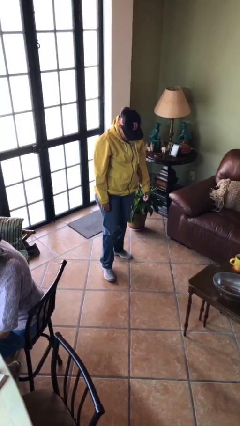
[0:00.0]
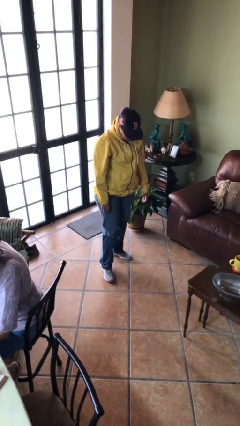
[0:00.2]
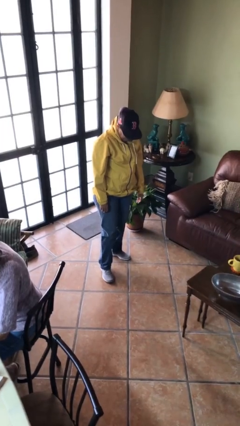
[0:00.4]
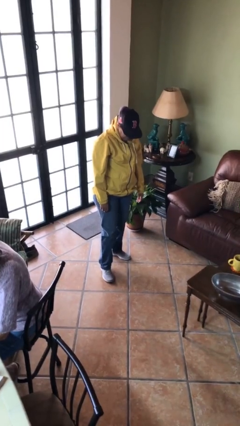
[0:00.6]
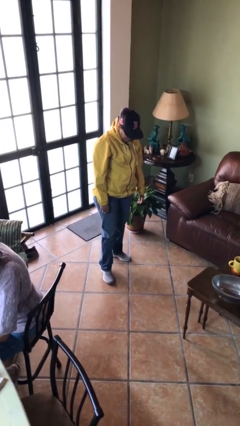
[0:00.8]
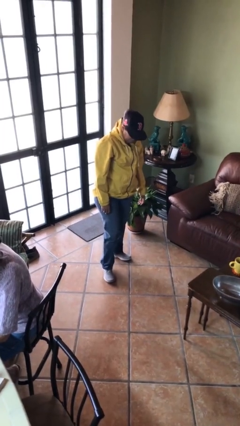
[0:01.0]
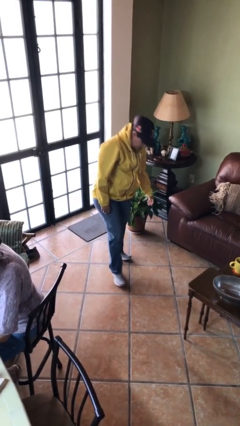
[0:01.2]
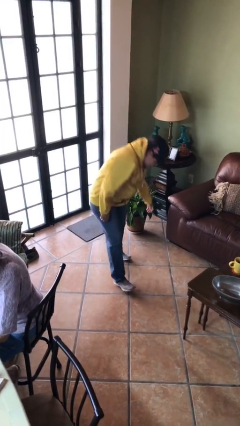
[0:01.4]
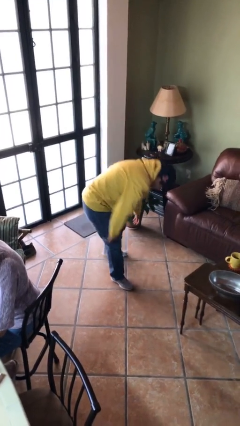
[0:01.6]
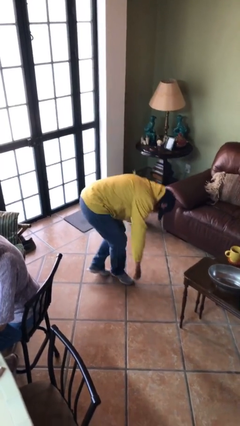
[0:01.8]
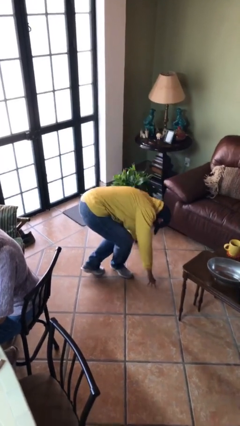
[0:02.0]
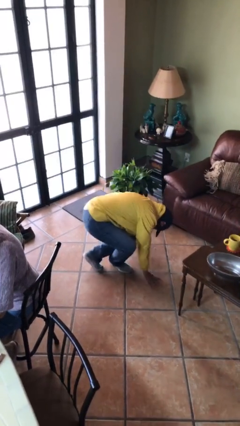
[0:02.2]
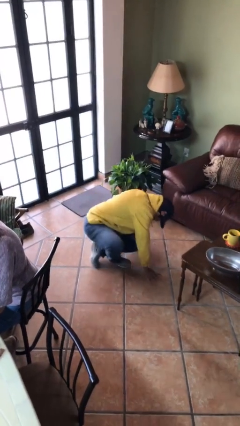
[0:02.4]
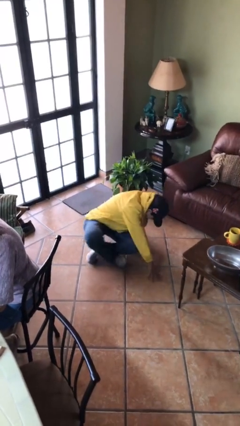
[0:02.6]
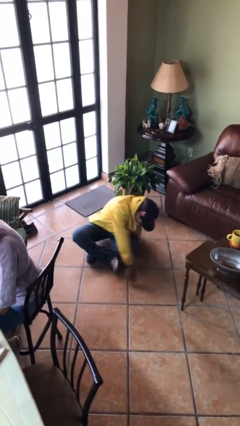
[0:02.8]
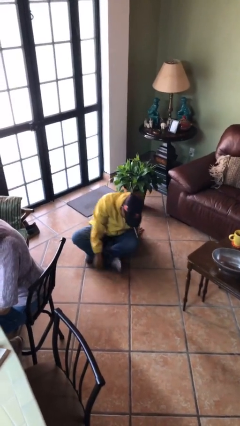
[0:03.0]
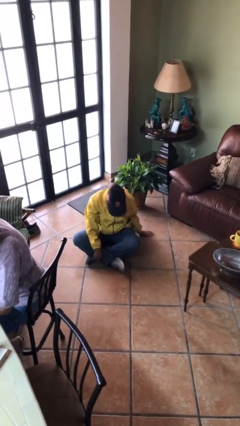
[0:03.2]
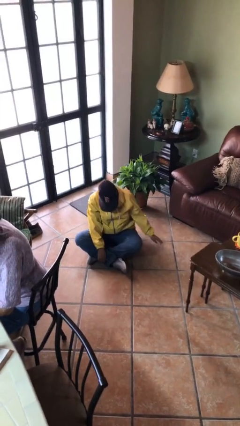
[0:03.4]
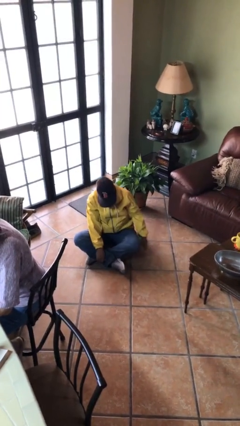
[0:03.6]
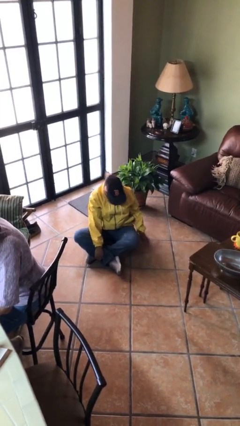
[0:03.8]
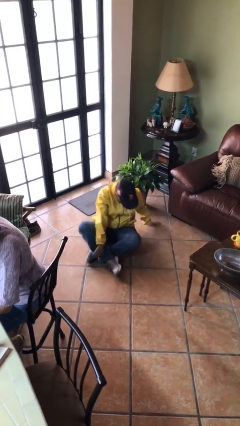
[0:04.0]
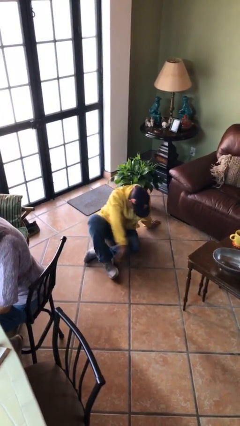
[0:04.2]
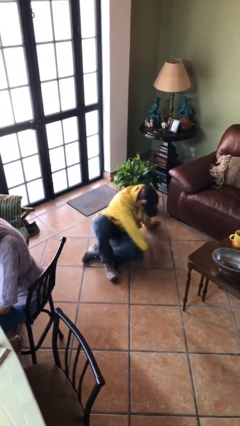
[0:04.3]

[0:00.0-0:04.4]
person sits crisscross

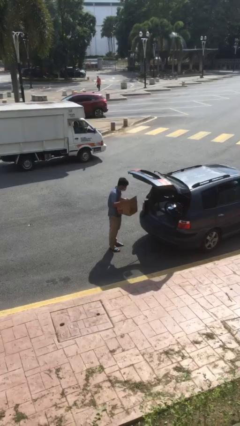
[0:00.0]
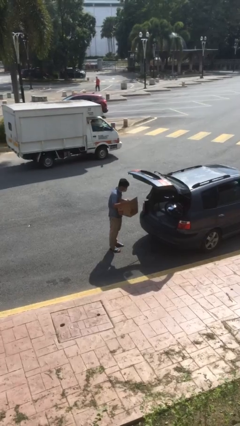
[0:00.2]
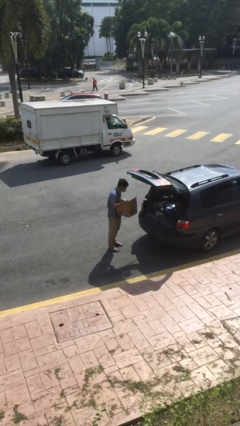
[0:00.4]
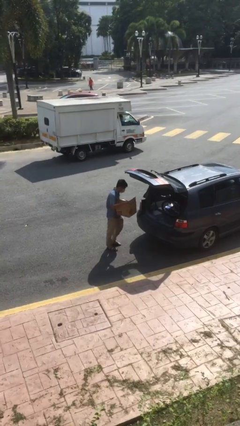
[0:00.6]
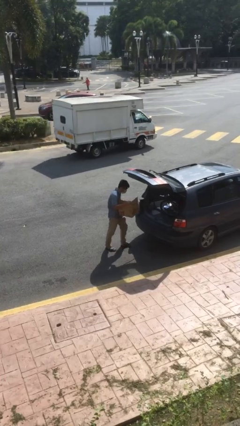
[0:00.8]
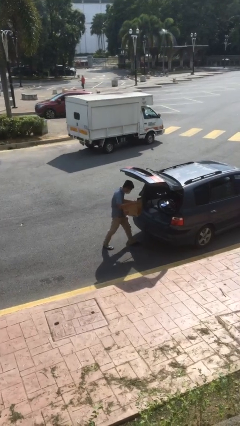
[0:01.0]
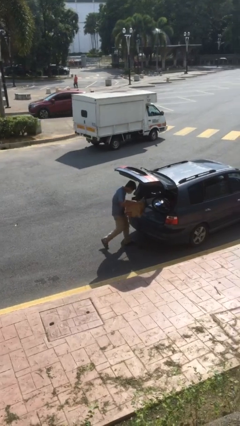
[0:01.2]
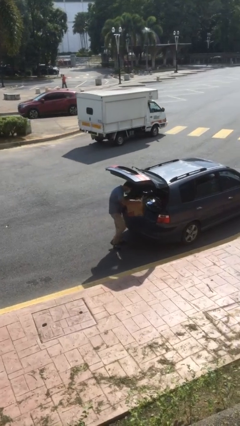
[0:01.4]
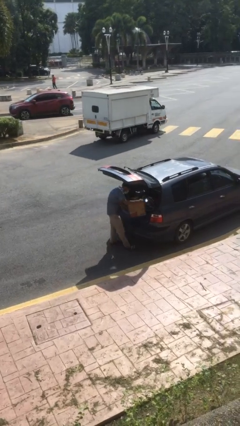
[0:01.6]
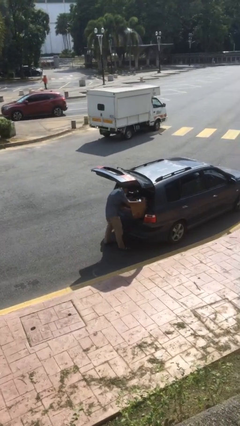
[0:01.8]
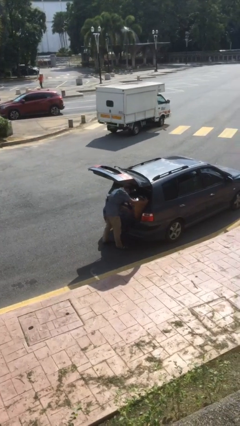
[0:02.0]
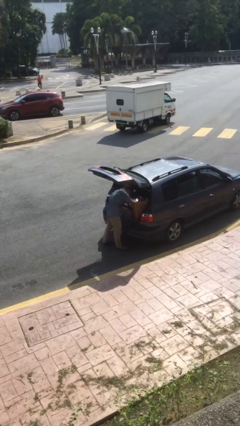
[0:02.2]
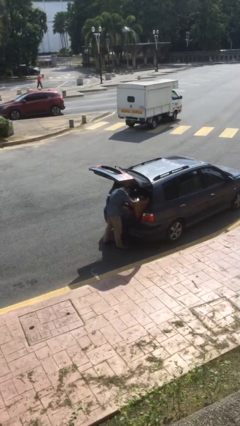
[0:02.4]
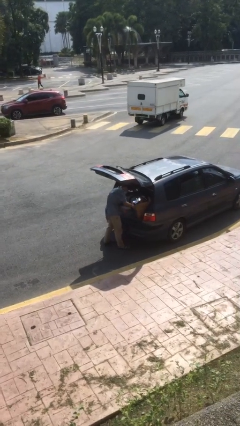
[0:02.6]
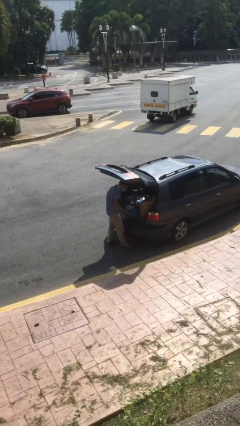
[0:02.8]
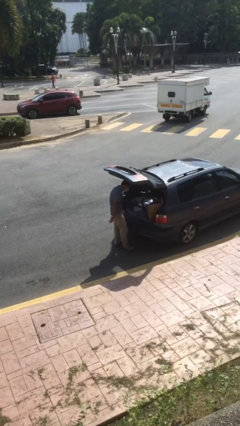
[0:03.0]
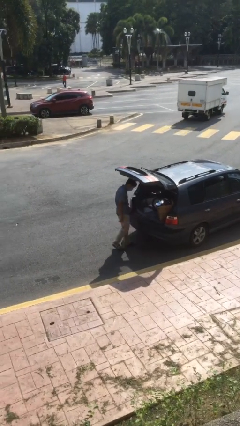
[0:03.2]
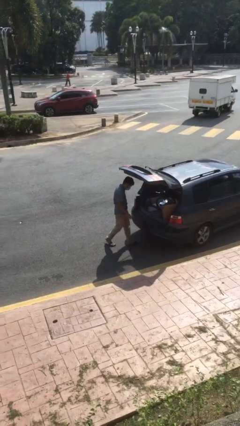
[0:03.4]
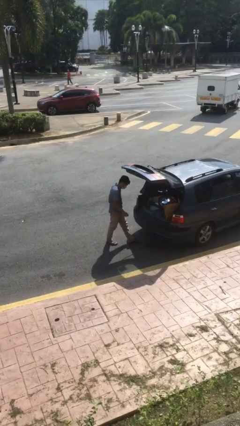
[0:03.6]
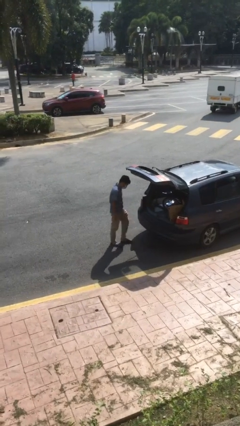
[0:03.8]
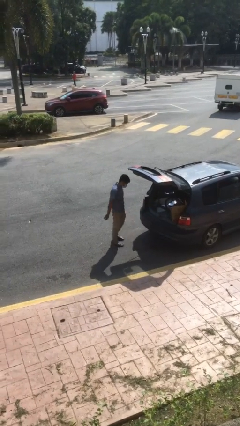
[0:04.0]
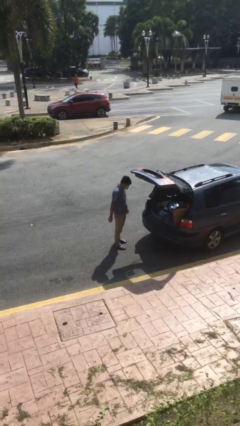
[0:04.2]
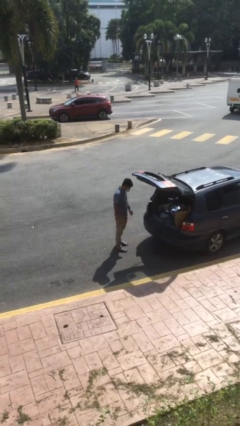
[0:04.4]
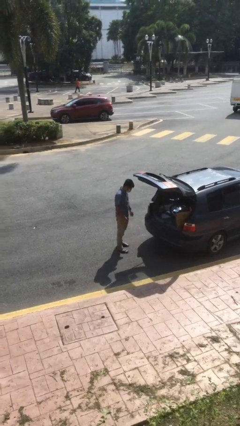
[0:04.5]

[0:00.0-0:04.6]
person loads car

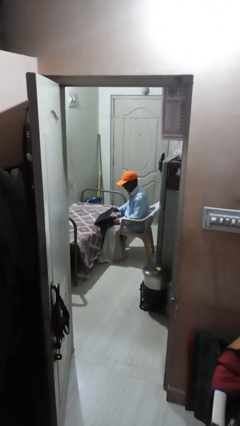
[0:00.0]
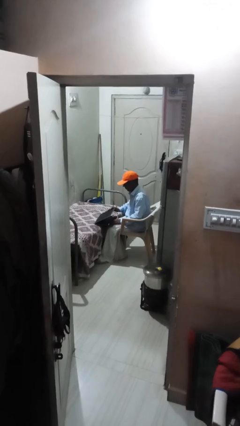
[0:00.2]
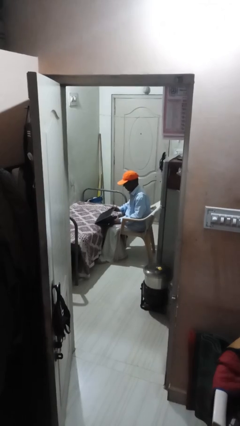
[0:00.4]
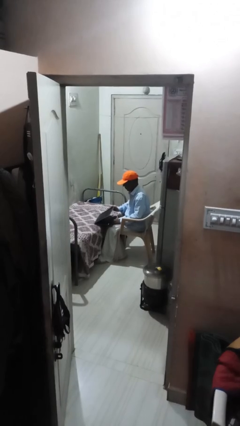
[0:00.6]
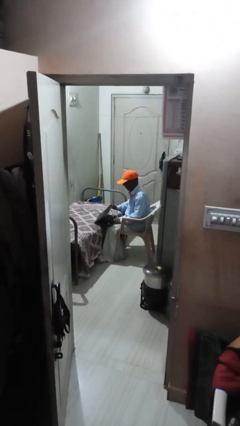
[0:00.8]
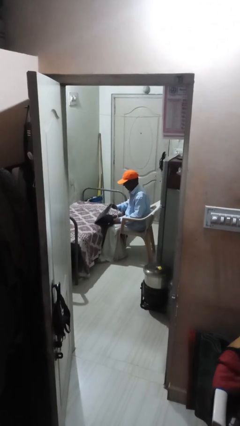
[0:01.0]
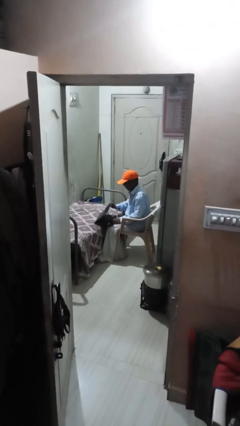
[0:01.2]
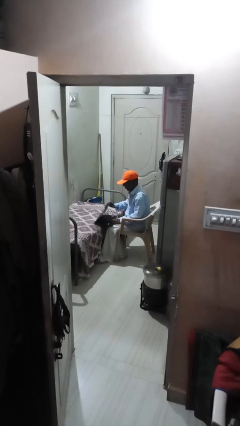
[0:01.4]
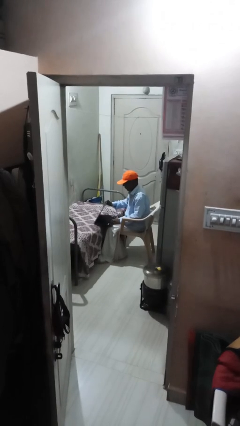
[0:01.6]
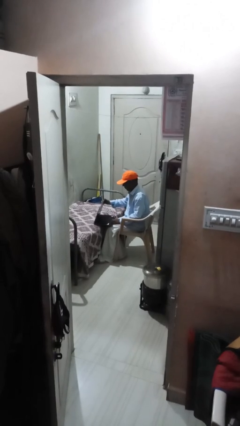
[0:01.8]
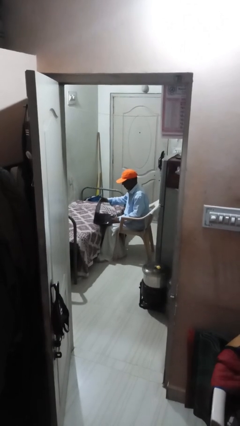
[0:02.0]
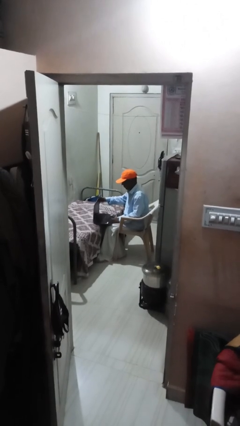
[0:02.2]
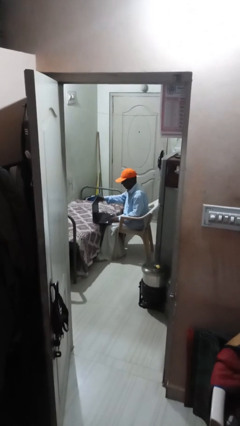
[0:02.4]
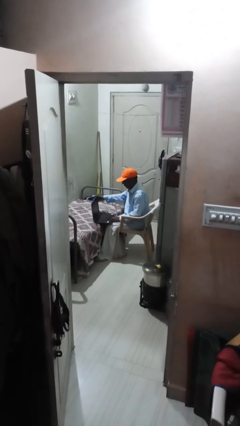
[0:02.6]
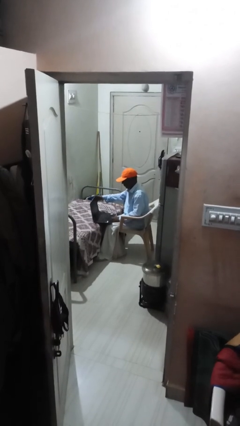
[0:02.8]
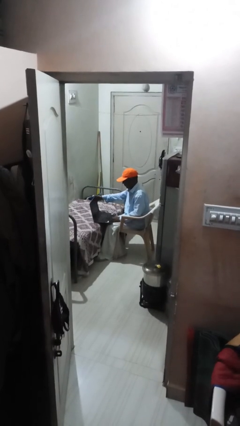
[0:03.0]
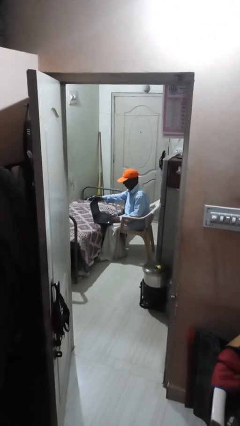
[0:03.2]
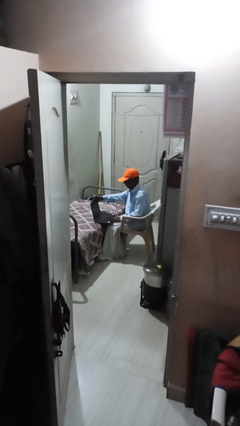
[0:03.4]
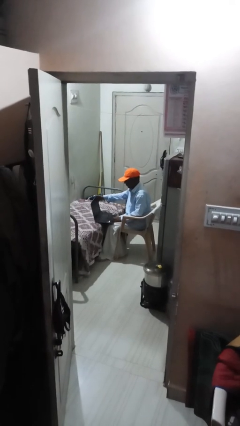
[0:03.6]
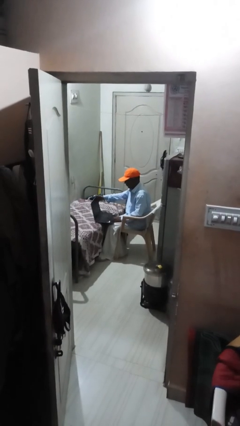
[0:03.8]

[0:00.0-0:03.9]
person interacts with laptop

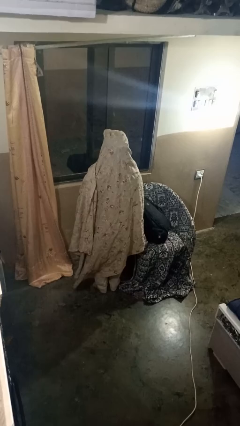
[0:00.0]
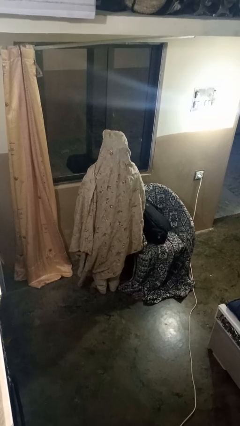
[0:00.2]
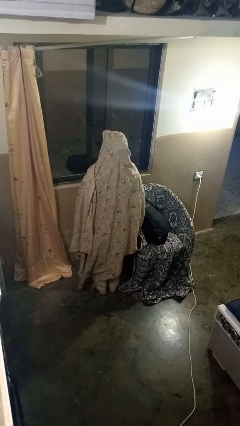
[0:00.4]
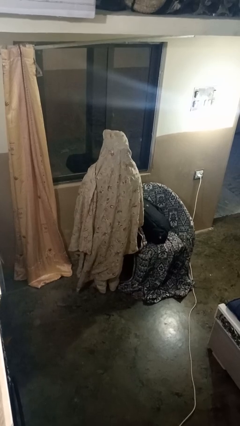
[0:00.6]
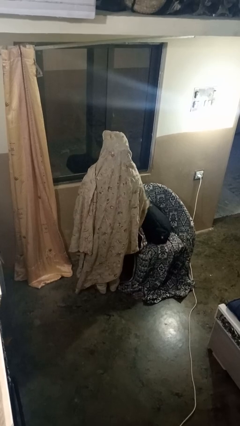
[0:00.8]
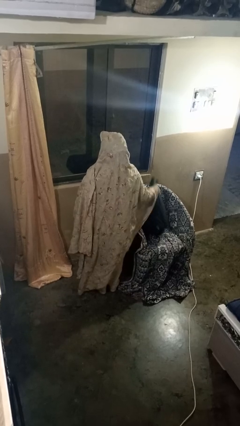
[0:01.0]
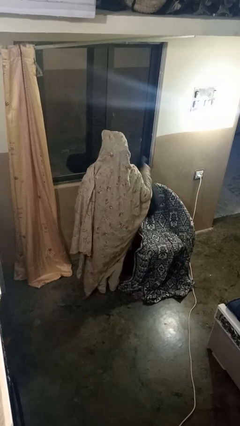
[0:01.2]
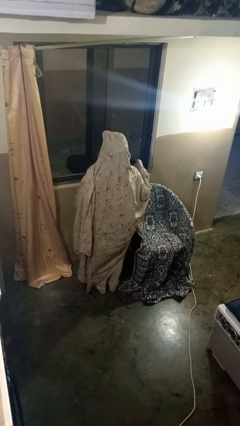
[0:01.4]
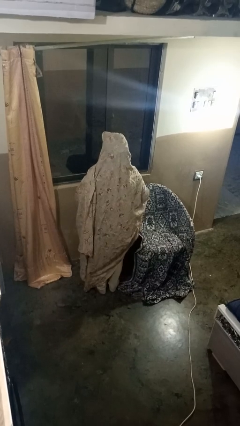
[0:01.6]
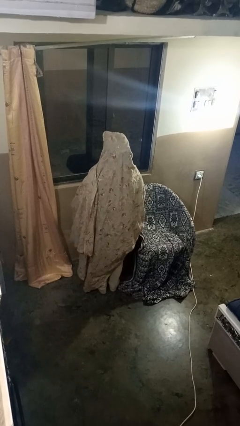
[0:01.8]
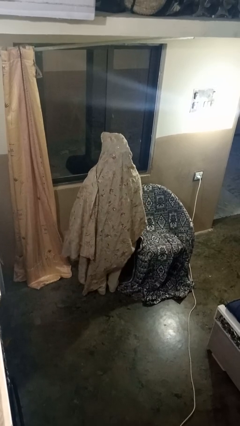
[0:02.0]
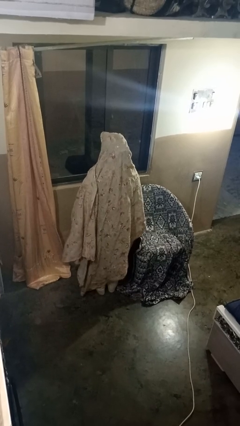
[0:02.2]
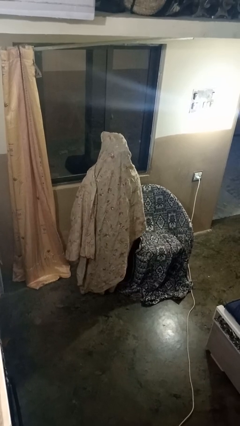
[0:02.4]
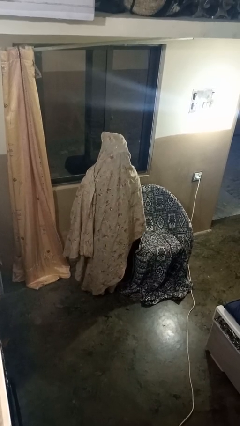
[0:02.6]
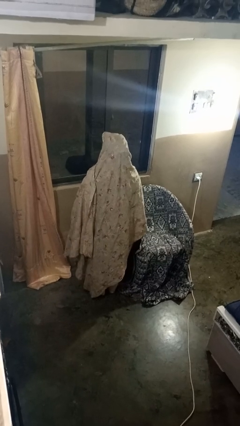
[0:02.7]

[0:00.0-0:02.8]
person picks up object from couch

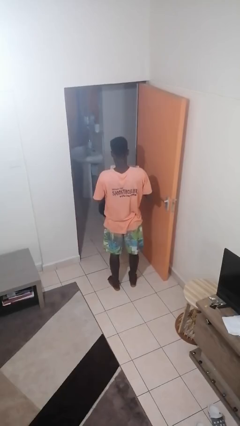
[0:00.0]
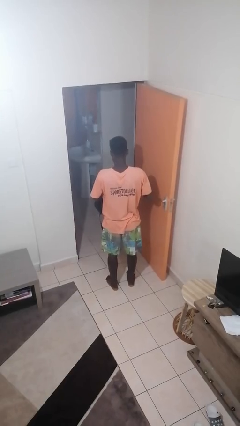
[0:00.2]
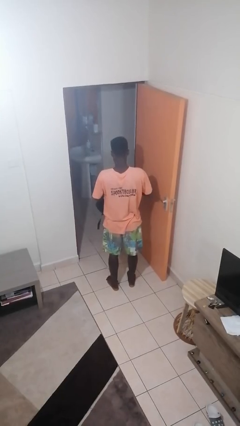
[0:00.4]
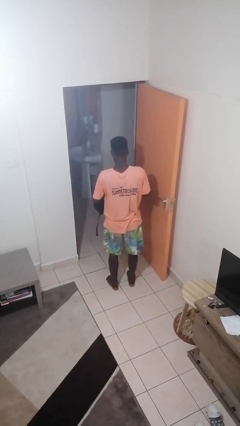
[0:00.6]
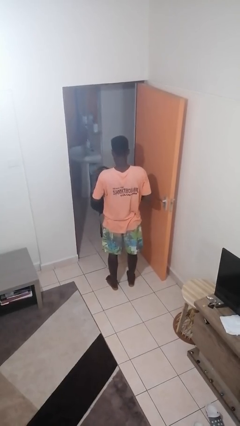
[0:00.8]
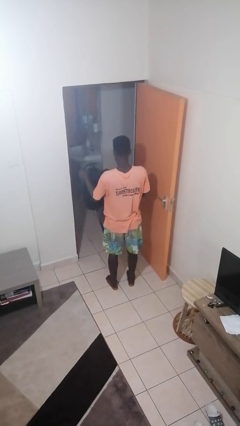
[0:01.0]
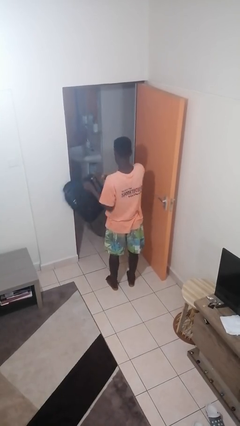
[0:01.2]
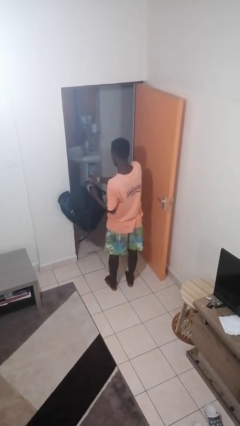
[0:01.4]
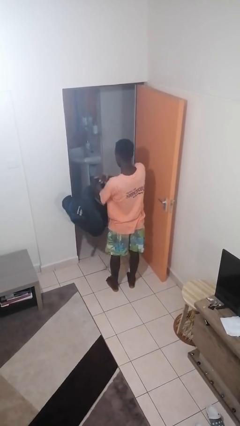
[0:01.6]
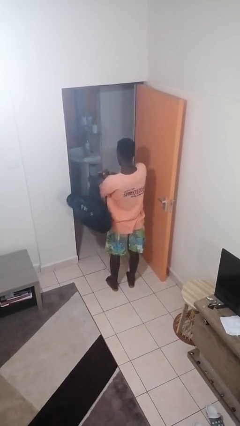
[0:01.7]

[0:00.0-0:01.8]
person puts object into backpack
